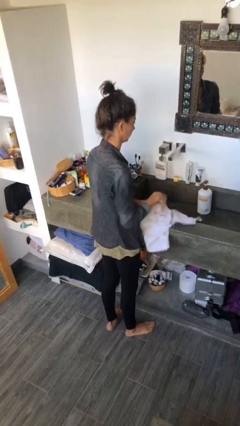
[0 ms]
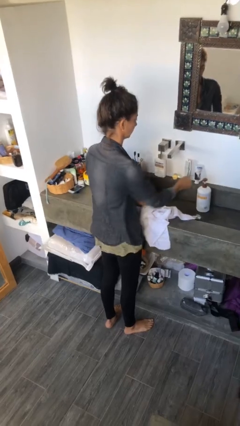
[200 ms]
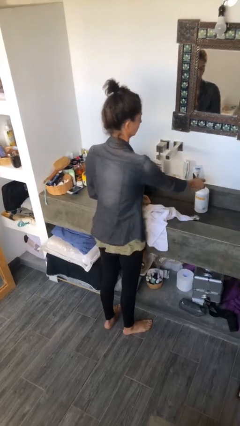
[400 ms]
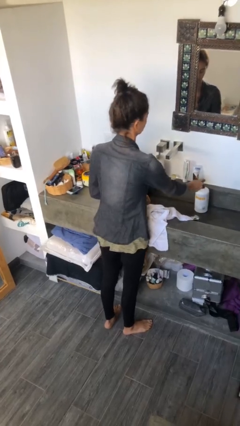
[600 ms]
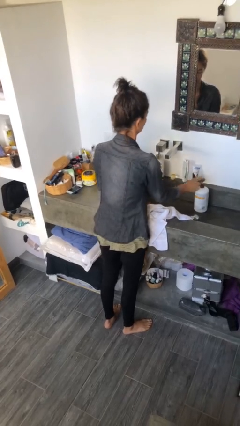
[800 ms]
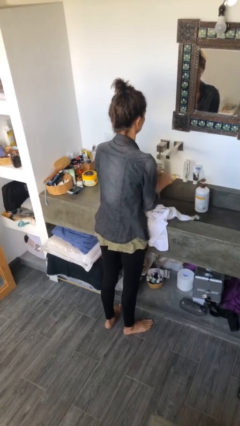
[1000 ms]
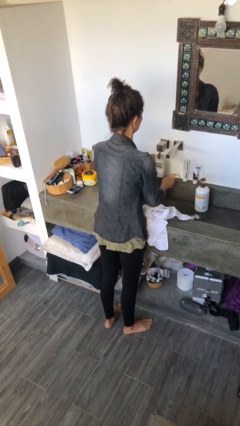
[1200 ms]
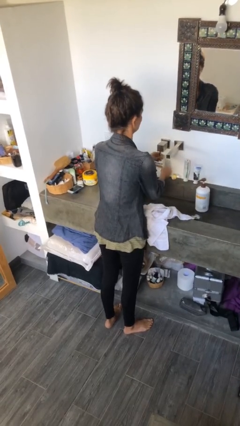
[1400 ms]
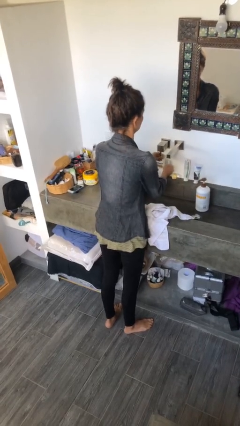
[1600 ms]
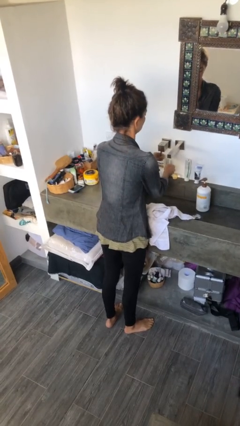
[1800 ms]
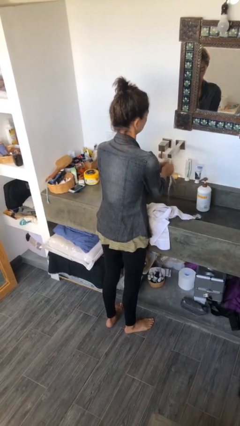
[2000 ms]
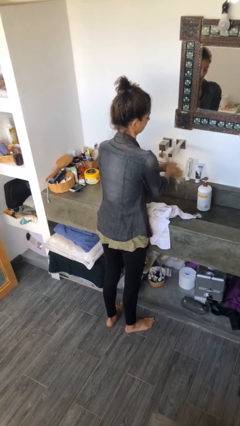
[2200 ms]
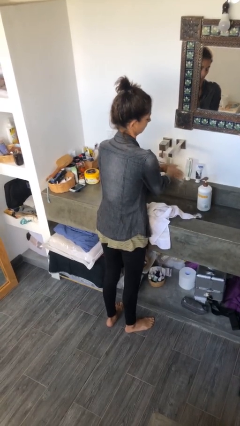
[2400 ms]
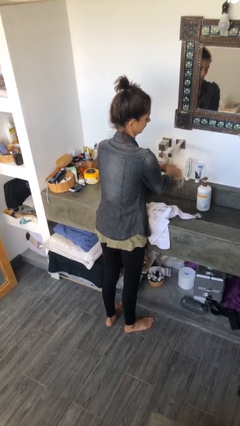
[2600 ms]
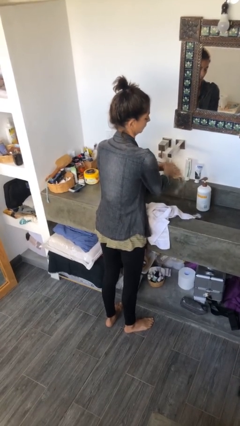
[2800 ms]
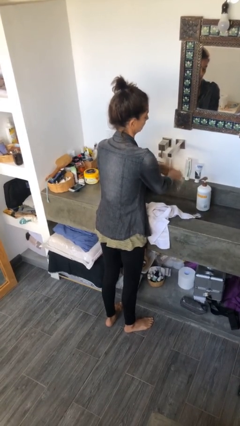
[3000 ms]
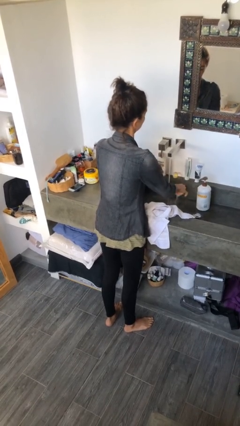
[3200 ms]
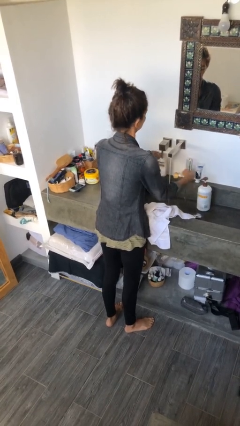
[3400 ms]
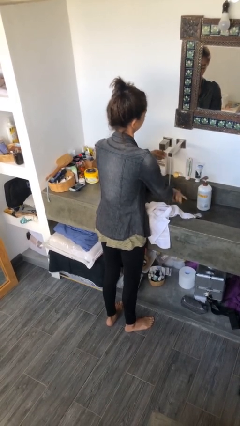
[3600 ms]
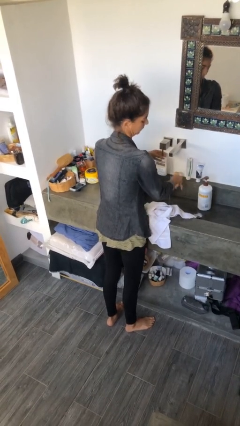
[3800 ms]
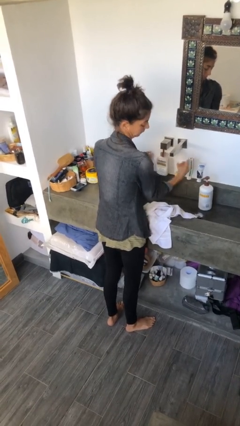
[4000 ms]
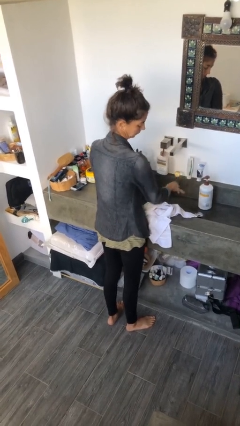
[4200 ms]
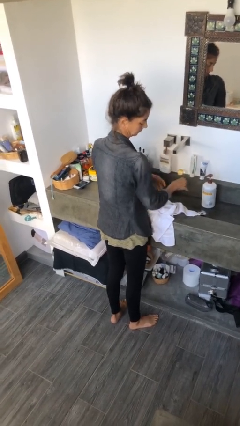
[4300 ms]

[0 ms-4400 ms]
person washes hands

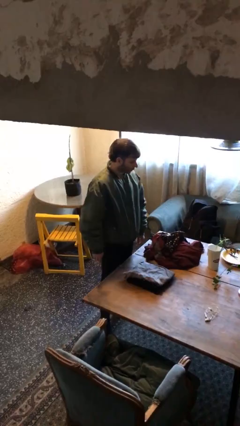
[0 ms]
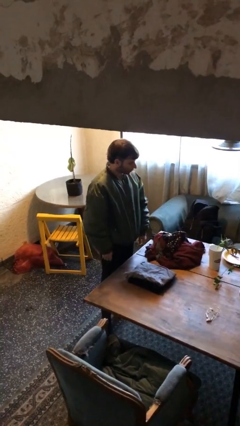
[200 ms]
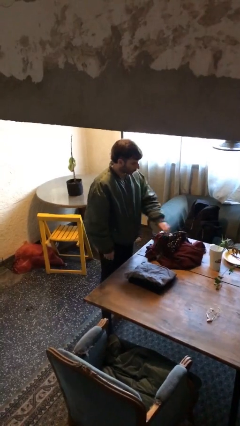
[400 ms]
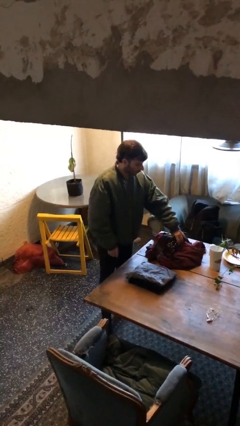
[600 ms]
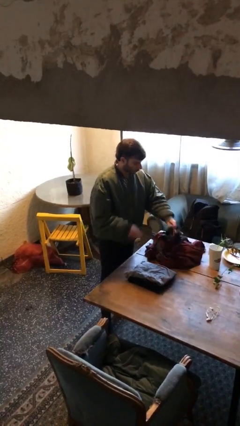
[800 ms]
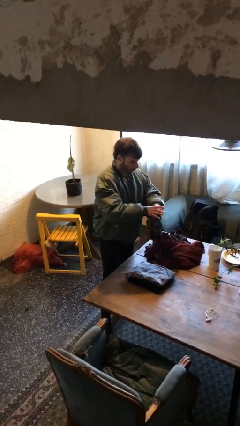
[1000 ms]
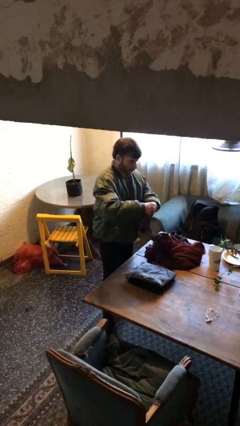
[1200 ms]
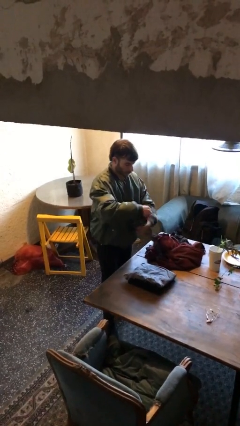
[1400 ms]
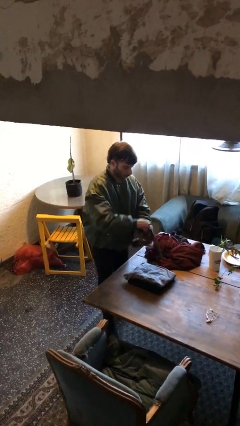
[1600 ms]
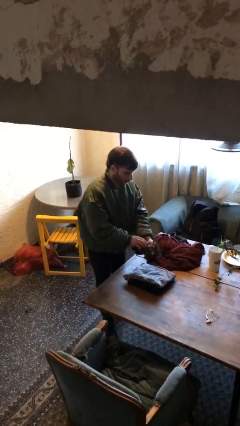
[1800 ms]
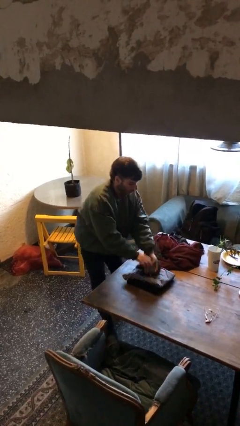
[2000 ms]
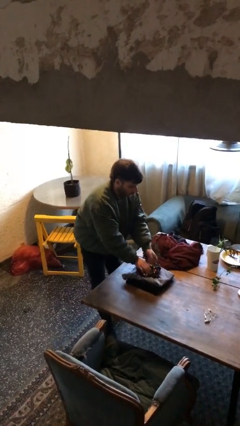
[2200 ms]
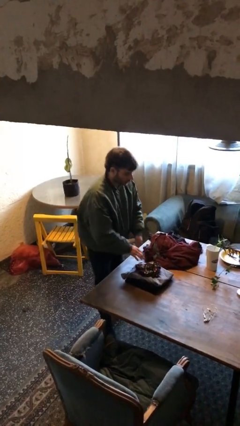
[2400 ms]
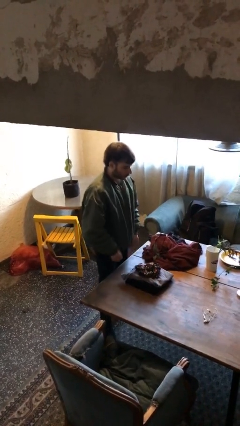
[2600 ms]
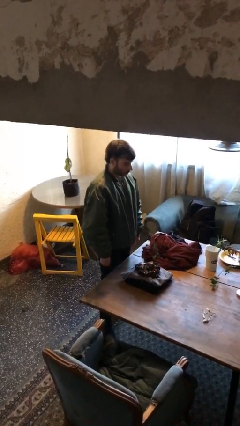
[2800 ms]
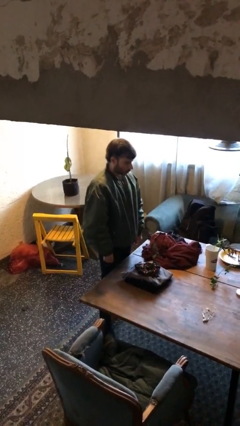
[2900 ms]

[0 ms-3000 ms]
person folds socks

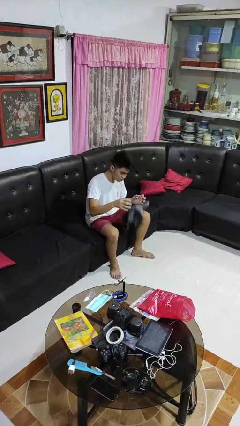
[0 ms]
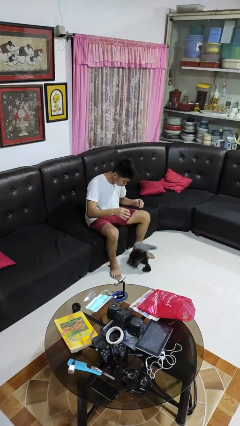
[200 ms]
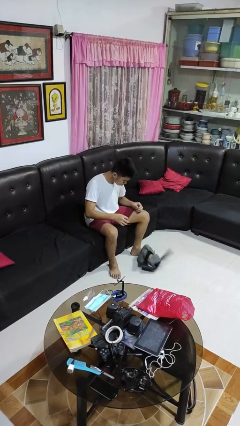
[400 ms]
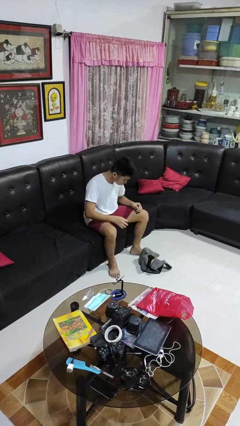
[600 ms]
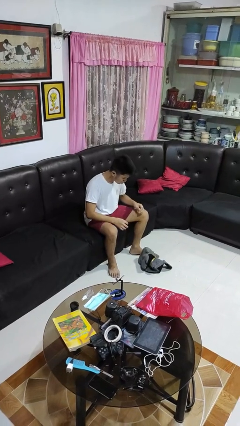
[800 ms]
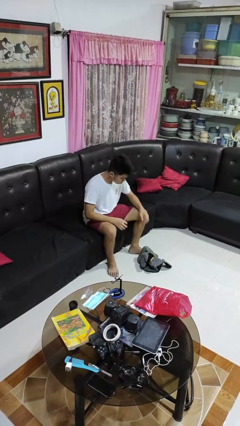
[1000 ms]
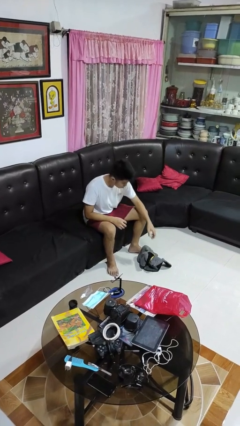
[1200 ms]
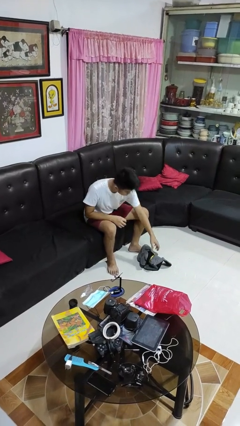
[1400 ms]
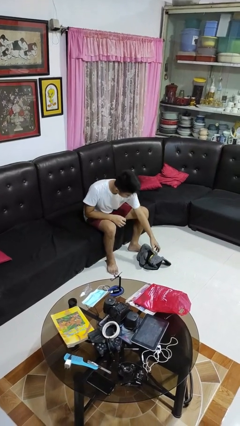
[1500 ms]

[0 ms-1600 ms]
person drops object

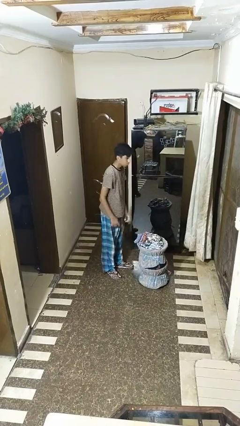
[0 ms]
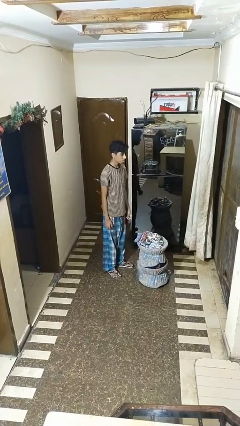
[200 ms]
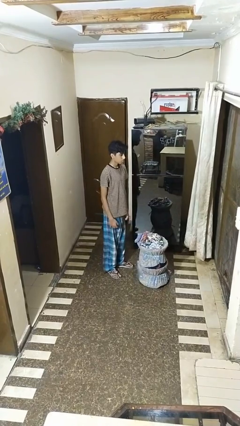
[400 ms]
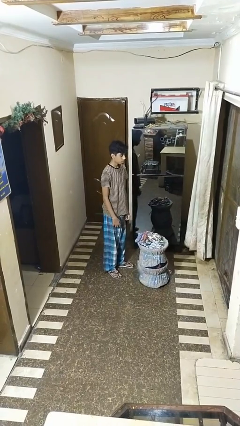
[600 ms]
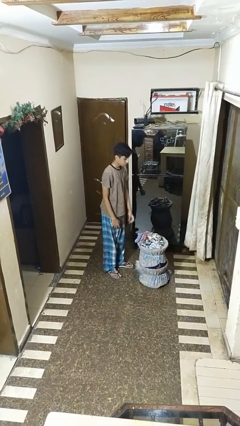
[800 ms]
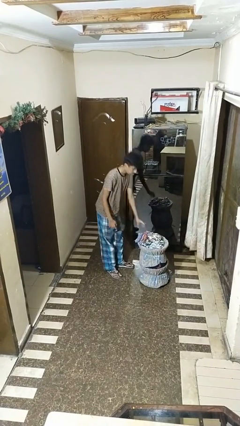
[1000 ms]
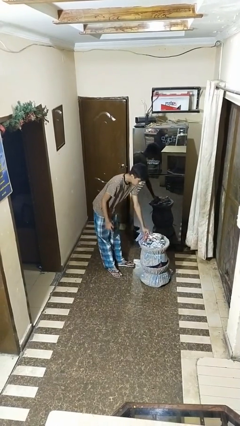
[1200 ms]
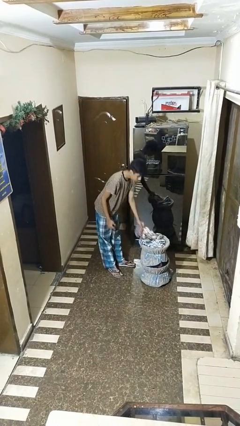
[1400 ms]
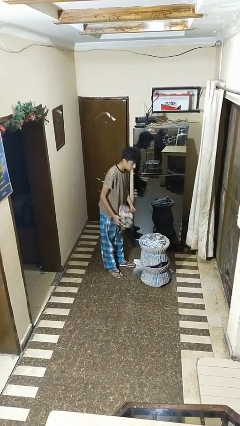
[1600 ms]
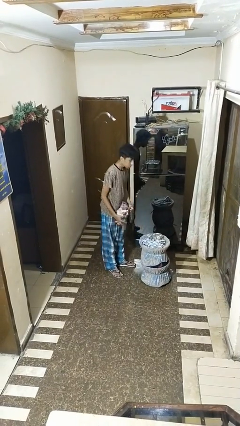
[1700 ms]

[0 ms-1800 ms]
person takes object from basket

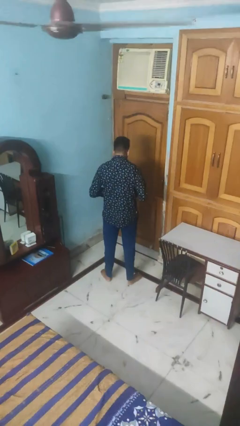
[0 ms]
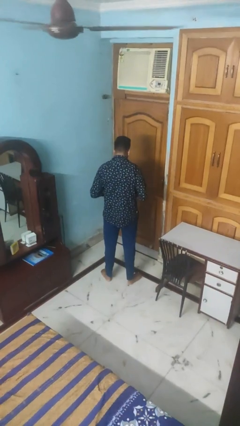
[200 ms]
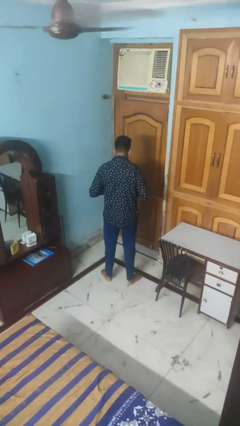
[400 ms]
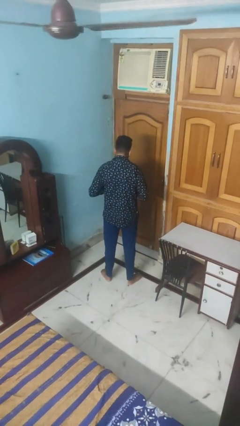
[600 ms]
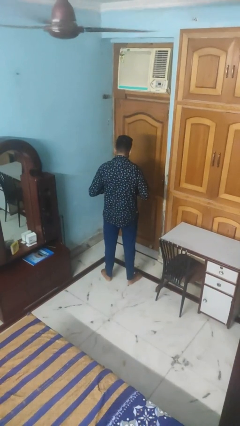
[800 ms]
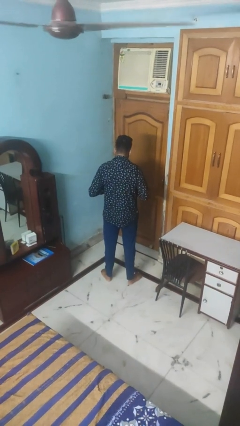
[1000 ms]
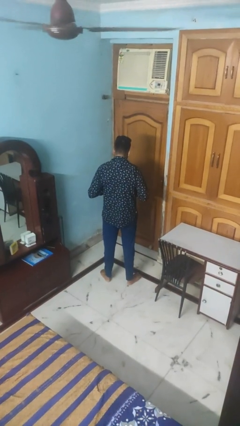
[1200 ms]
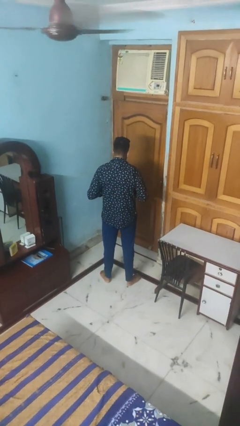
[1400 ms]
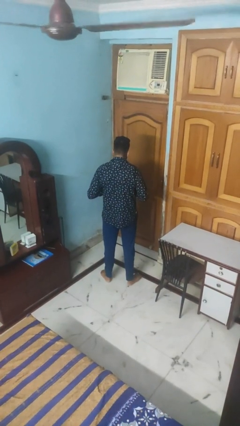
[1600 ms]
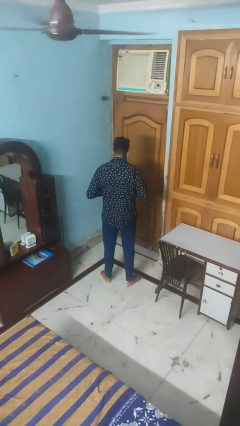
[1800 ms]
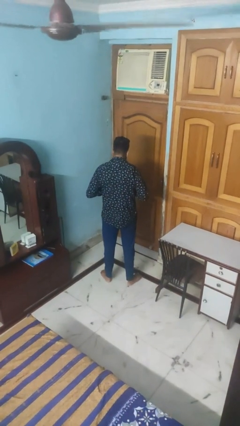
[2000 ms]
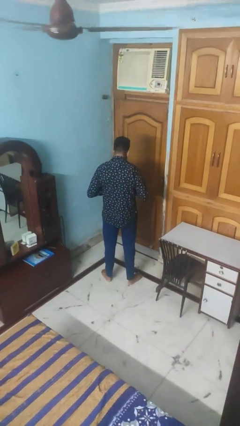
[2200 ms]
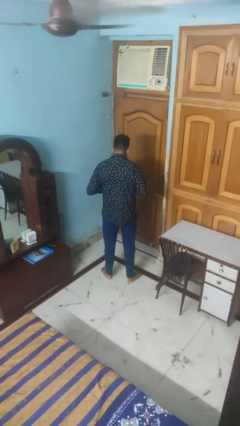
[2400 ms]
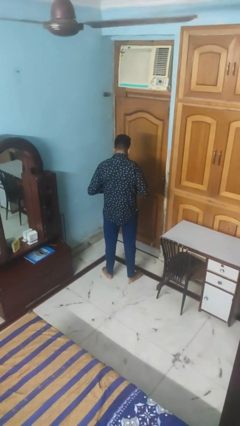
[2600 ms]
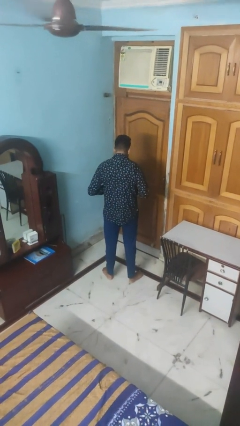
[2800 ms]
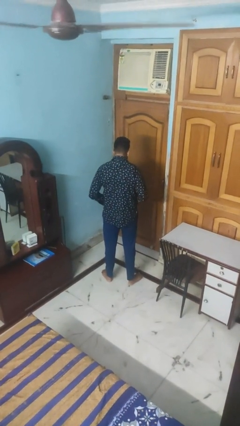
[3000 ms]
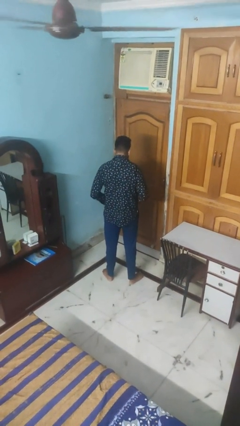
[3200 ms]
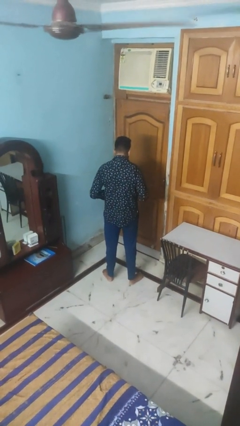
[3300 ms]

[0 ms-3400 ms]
person buttons shirt

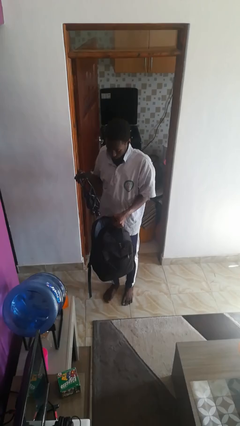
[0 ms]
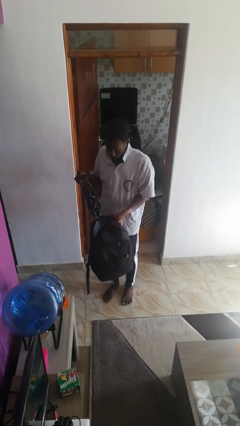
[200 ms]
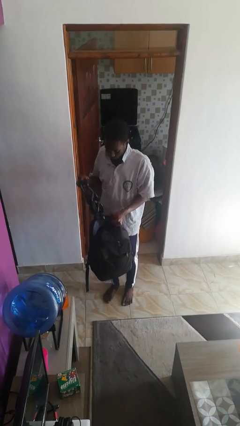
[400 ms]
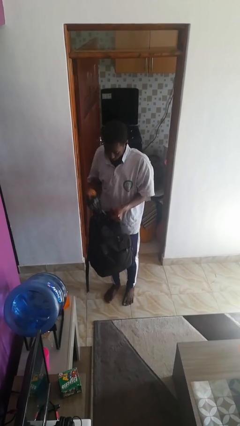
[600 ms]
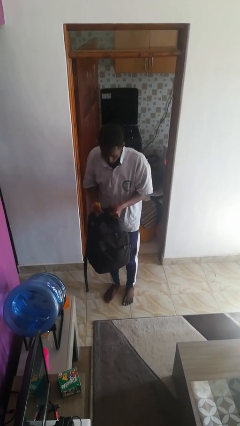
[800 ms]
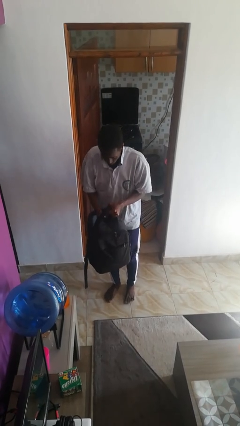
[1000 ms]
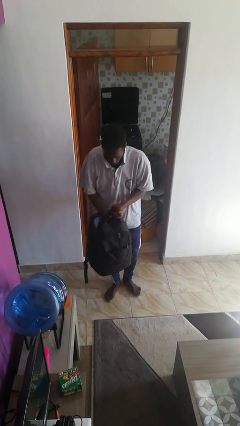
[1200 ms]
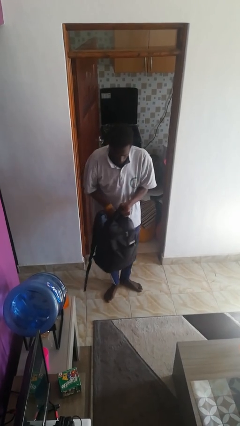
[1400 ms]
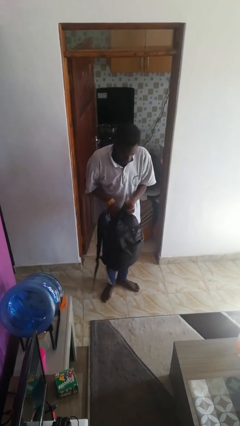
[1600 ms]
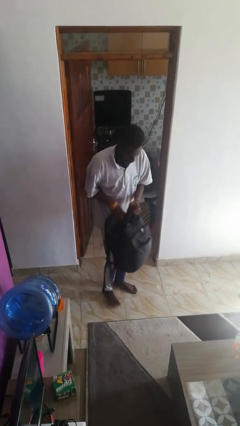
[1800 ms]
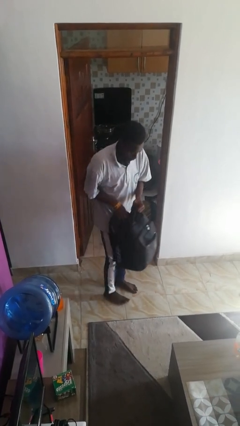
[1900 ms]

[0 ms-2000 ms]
person puts object into backpack

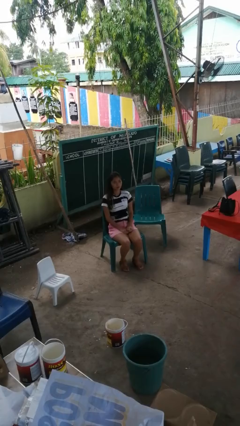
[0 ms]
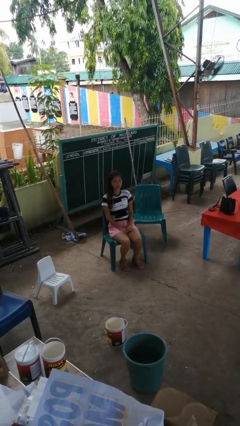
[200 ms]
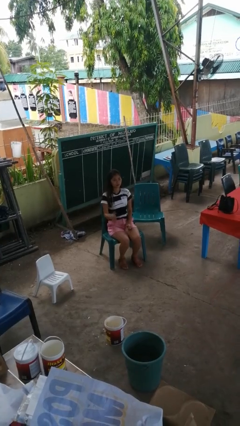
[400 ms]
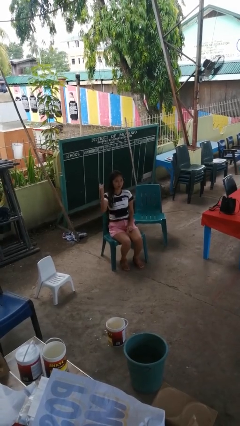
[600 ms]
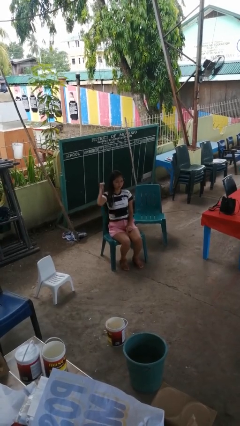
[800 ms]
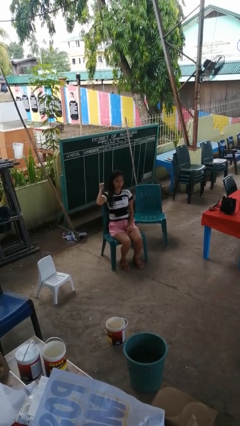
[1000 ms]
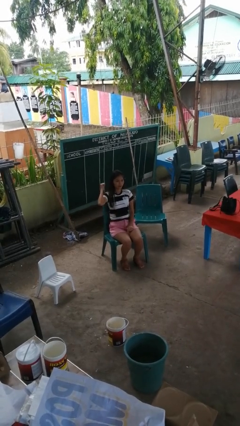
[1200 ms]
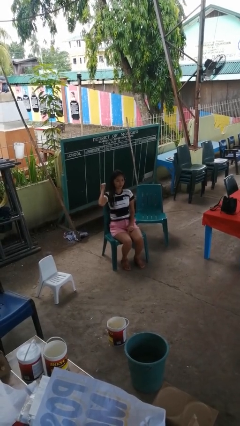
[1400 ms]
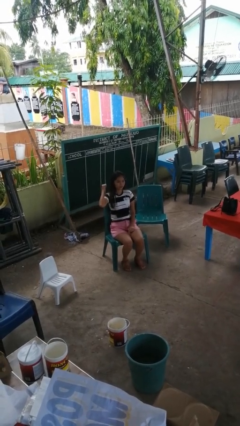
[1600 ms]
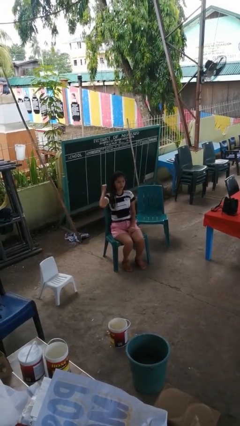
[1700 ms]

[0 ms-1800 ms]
person gestures behind me
